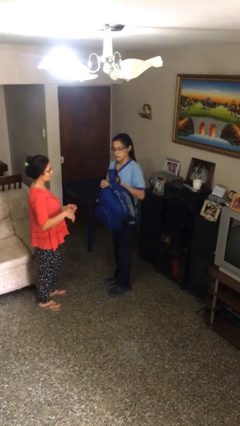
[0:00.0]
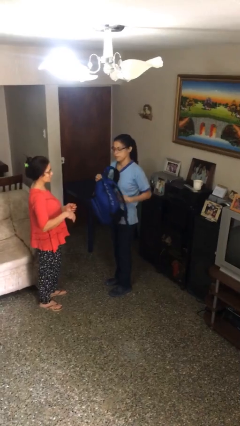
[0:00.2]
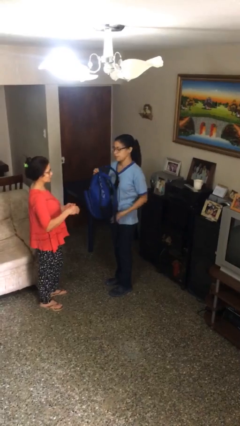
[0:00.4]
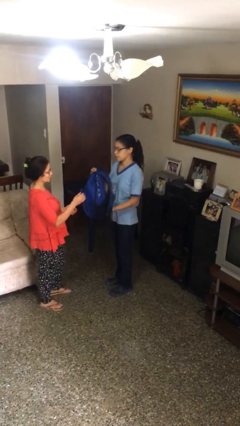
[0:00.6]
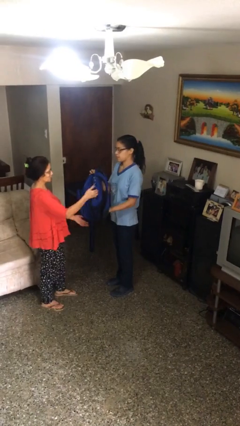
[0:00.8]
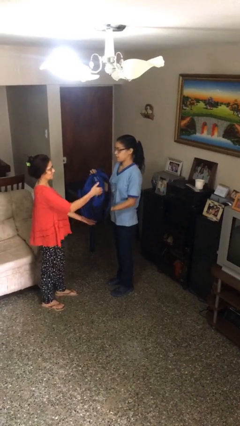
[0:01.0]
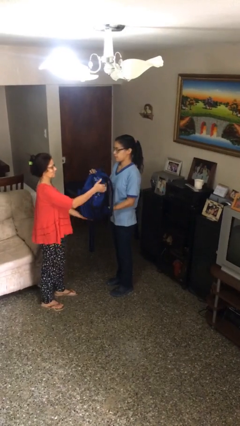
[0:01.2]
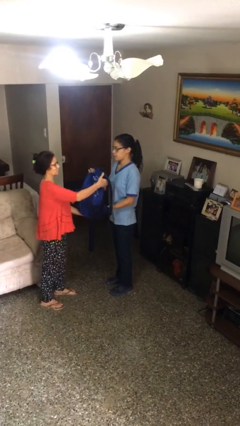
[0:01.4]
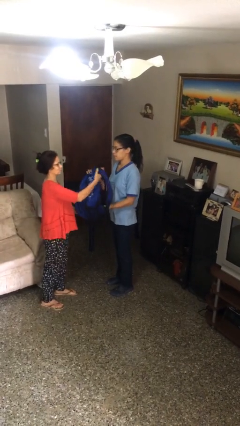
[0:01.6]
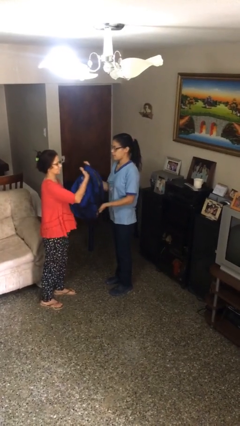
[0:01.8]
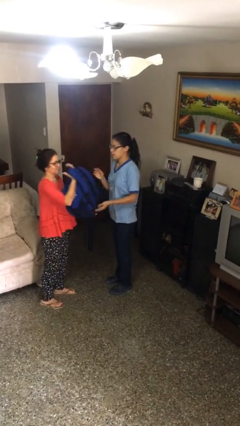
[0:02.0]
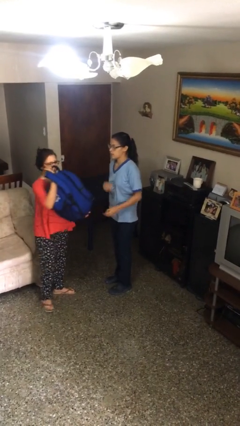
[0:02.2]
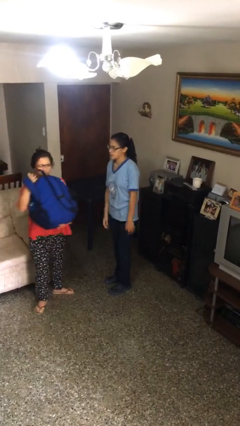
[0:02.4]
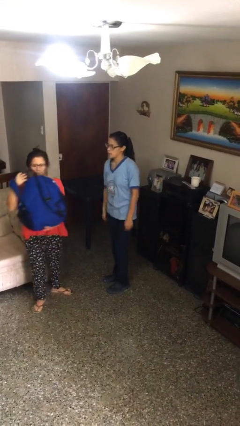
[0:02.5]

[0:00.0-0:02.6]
person transfers object to person

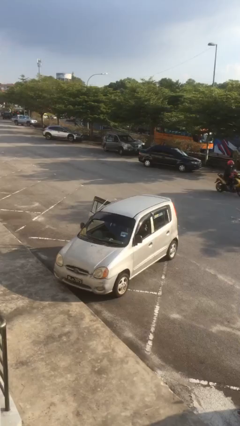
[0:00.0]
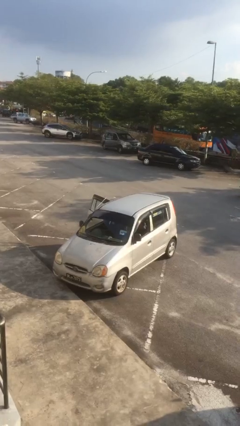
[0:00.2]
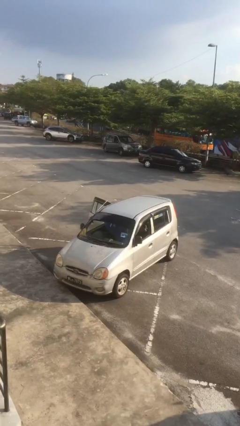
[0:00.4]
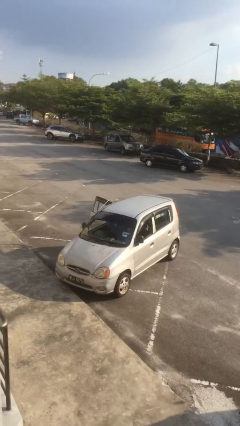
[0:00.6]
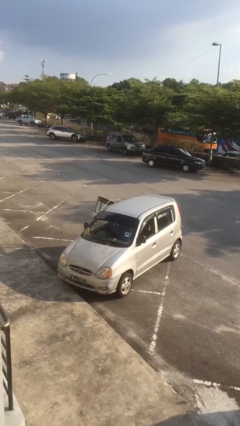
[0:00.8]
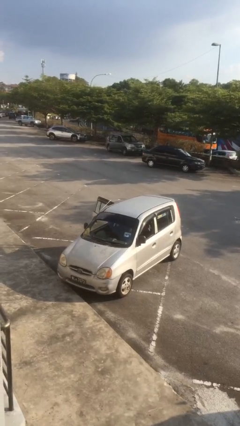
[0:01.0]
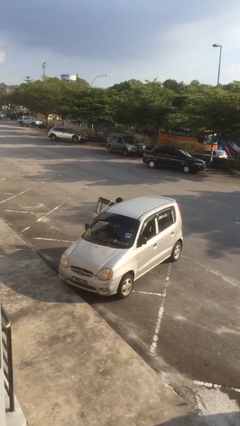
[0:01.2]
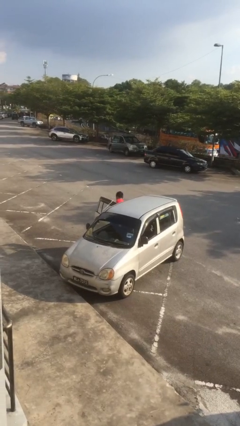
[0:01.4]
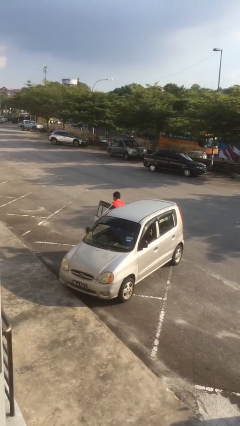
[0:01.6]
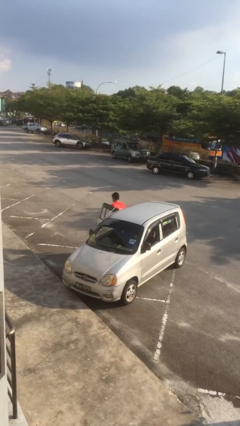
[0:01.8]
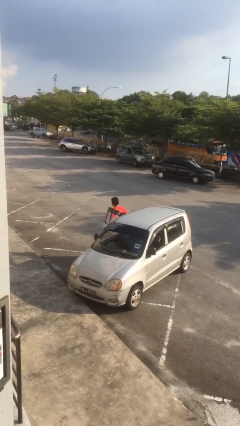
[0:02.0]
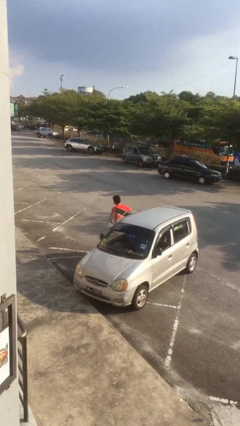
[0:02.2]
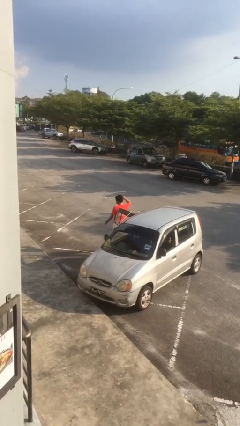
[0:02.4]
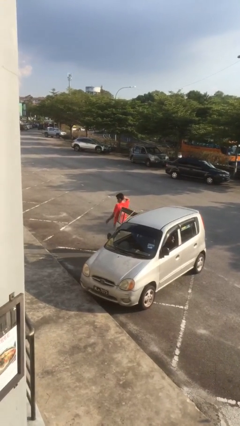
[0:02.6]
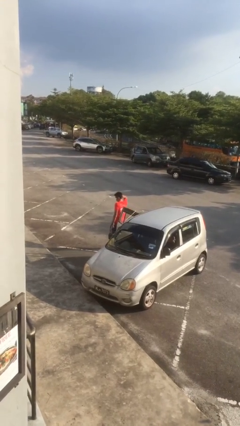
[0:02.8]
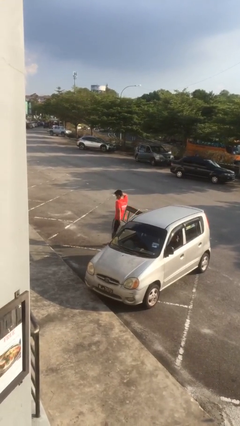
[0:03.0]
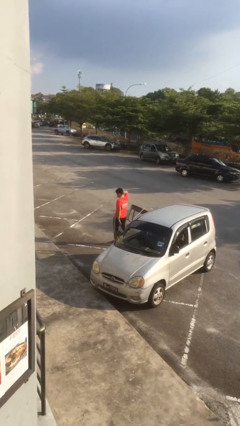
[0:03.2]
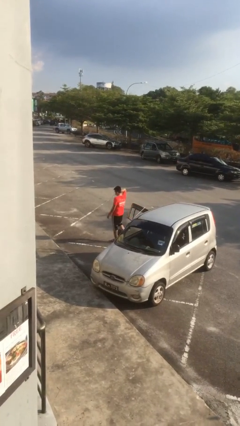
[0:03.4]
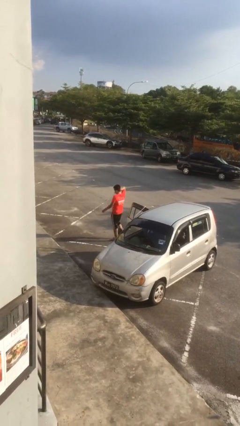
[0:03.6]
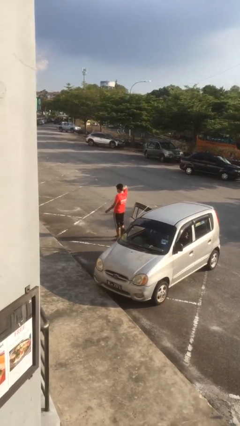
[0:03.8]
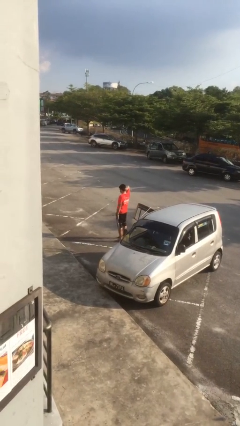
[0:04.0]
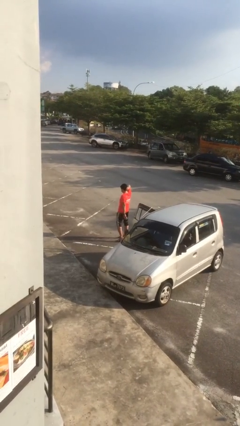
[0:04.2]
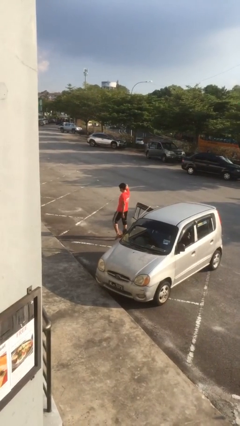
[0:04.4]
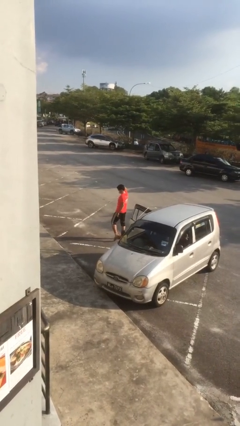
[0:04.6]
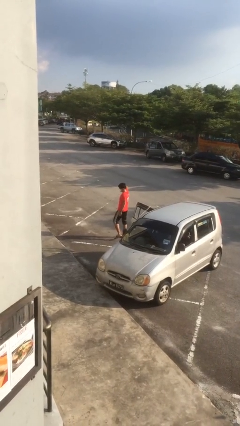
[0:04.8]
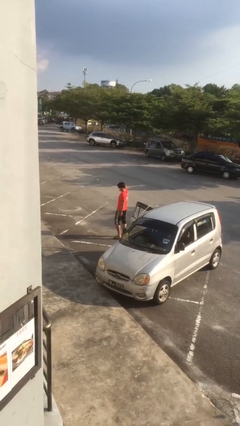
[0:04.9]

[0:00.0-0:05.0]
person exits car

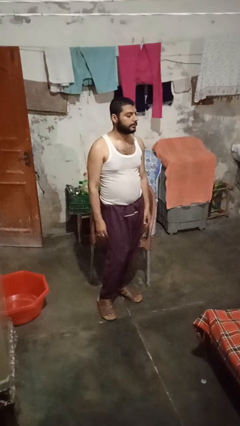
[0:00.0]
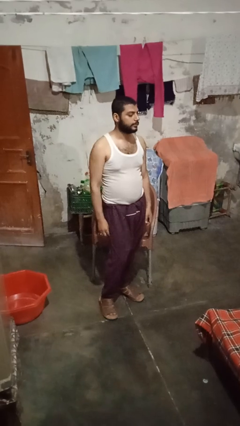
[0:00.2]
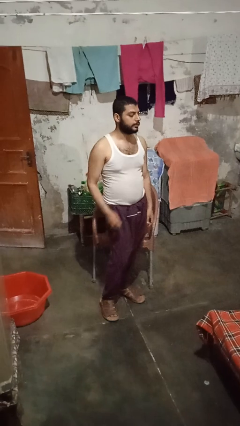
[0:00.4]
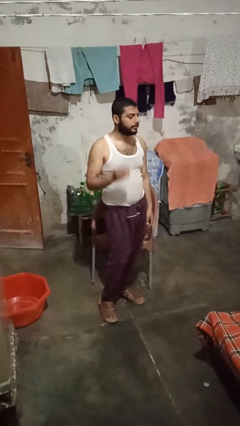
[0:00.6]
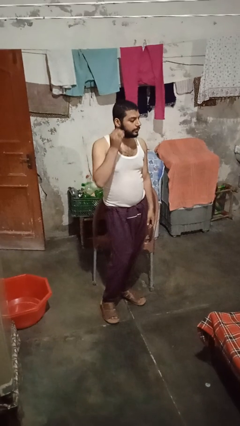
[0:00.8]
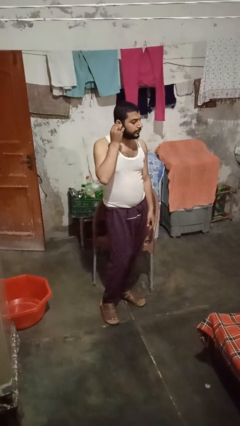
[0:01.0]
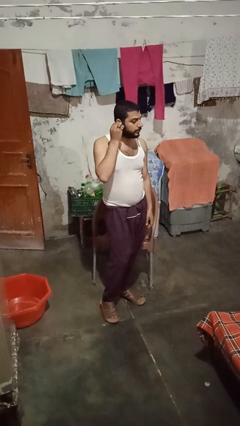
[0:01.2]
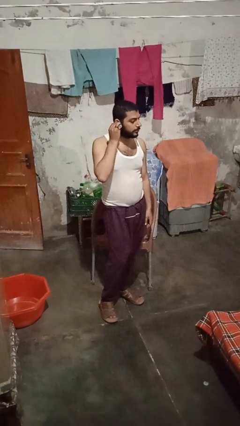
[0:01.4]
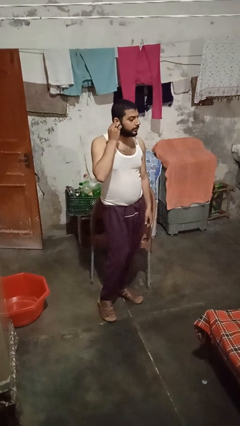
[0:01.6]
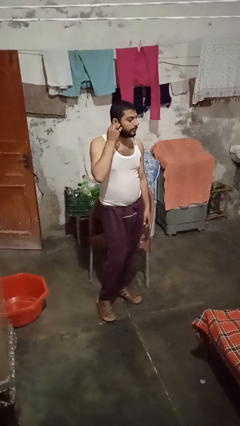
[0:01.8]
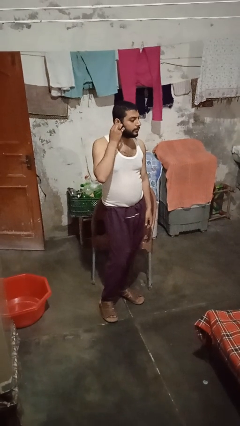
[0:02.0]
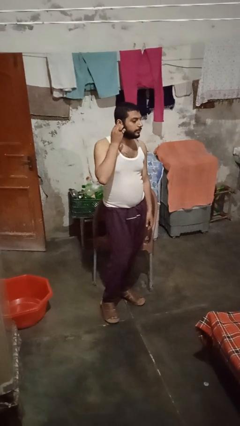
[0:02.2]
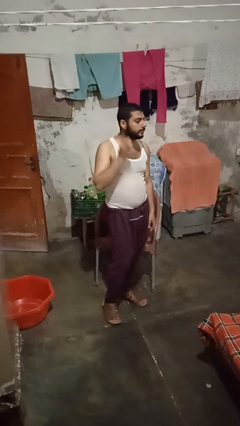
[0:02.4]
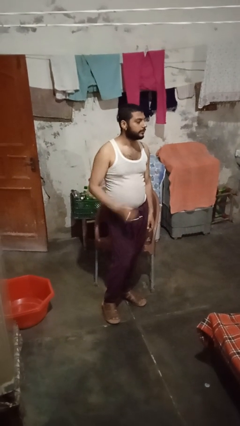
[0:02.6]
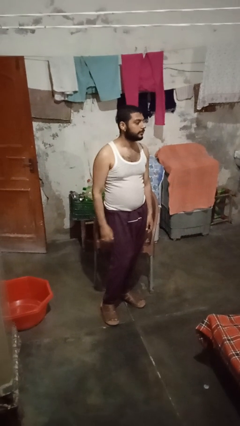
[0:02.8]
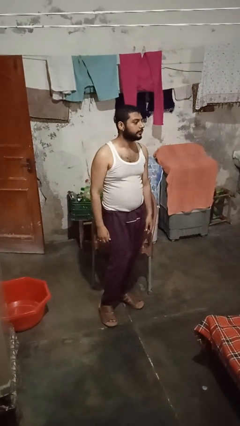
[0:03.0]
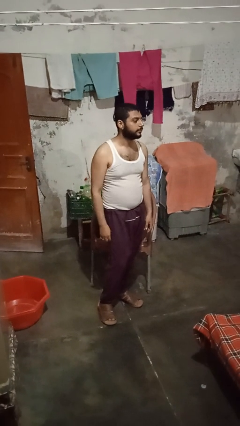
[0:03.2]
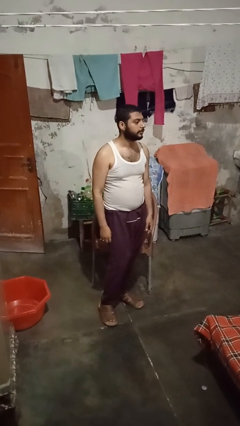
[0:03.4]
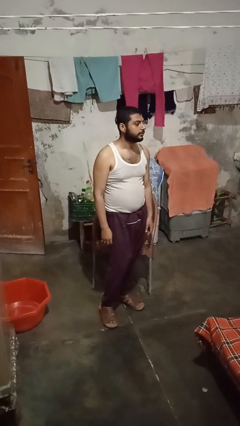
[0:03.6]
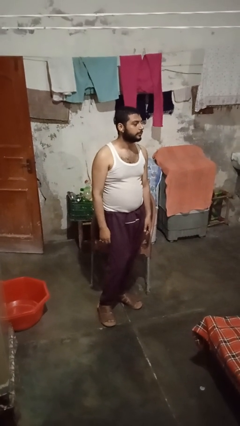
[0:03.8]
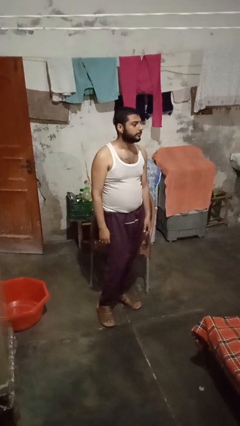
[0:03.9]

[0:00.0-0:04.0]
person puts on earrings

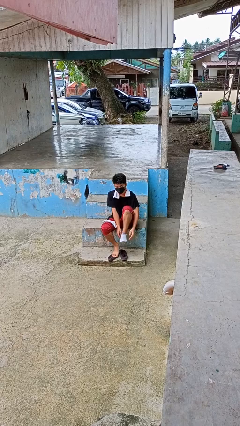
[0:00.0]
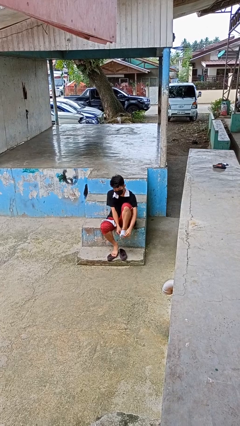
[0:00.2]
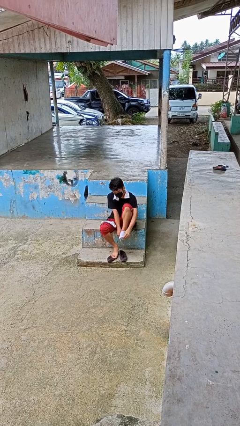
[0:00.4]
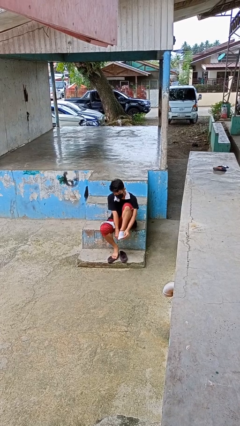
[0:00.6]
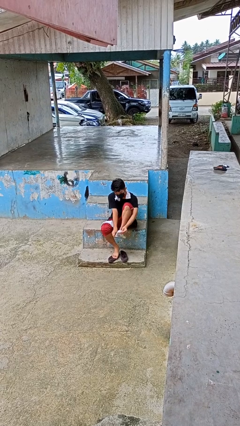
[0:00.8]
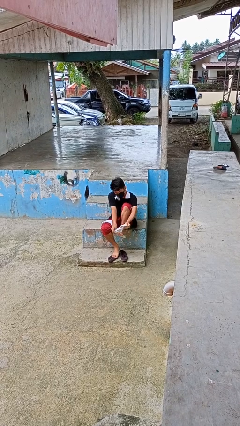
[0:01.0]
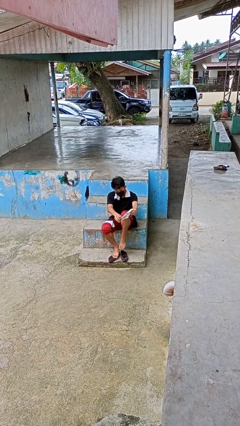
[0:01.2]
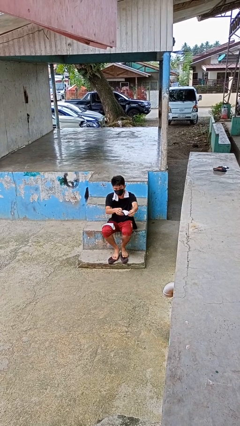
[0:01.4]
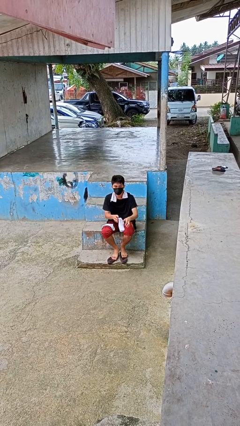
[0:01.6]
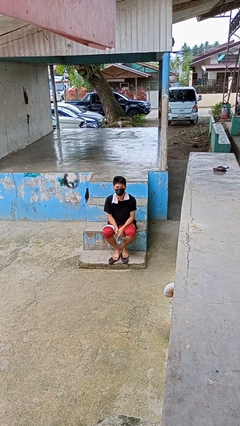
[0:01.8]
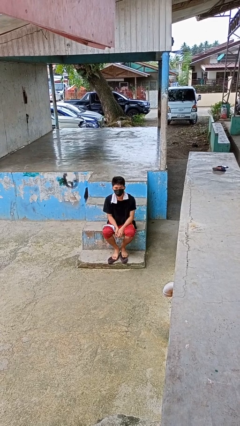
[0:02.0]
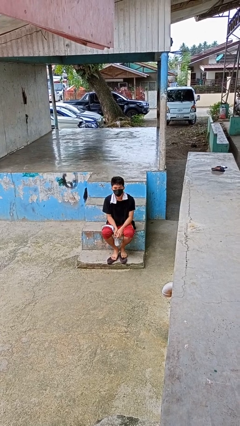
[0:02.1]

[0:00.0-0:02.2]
person takes off socks

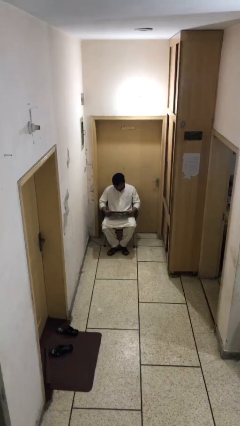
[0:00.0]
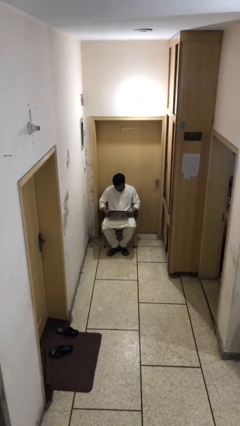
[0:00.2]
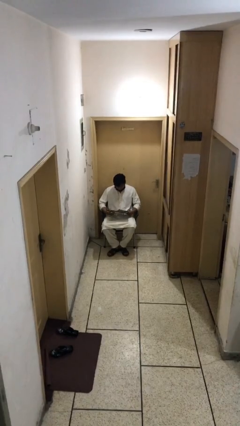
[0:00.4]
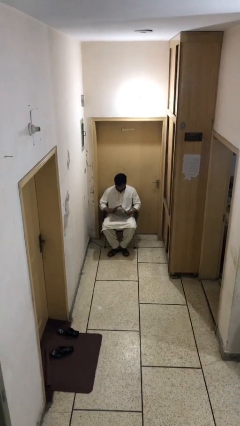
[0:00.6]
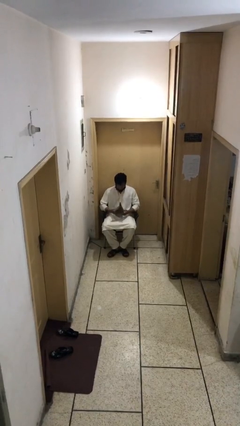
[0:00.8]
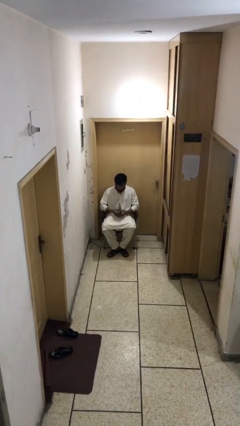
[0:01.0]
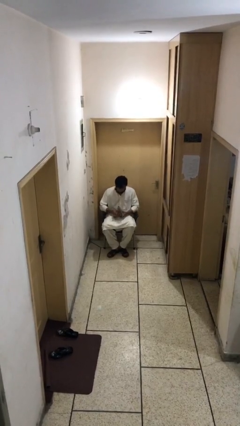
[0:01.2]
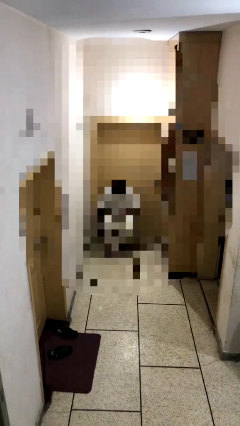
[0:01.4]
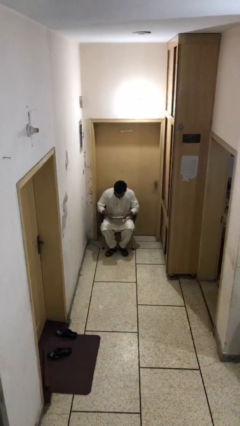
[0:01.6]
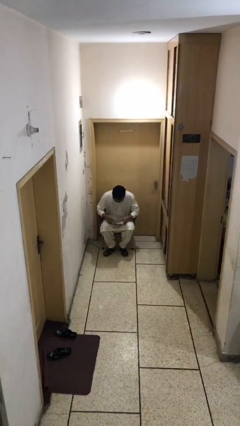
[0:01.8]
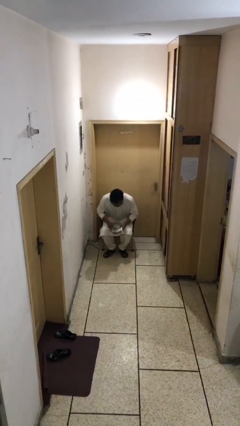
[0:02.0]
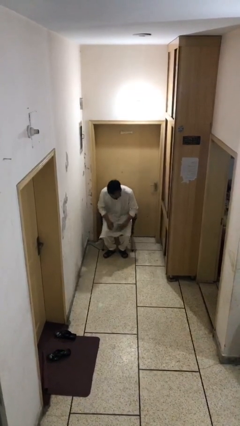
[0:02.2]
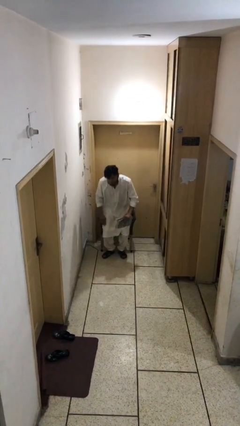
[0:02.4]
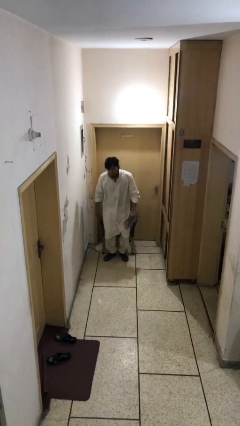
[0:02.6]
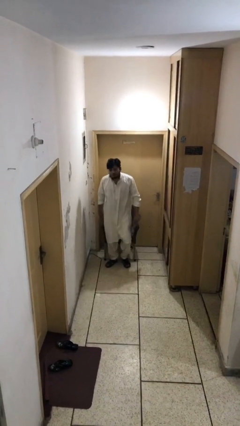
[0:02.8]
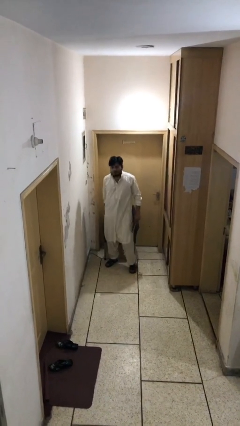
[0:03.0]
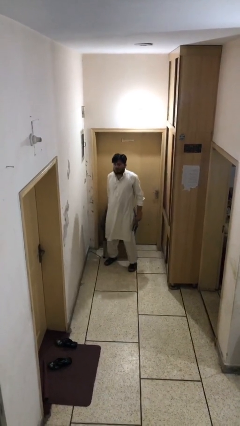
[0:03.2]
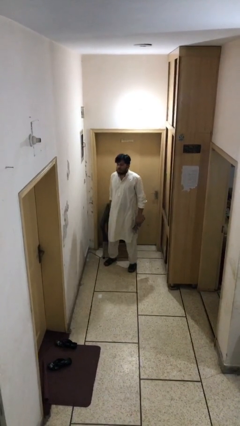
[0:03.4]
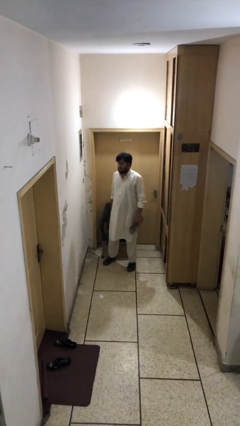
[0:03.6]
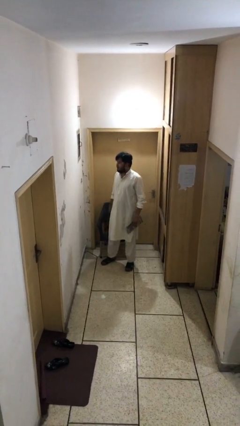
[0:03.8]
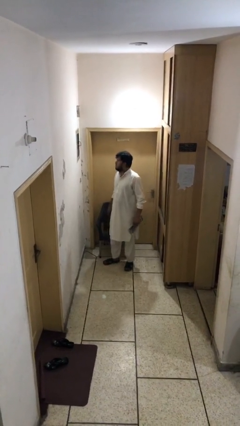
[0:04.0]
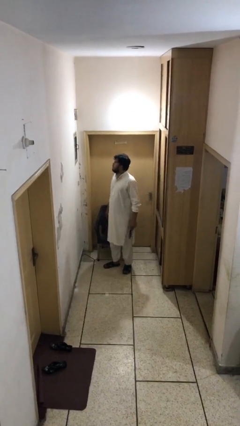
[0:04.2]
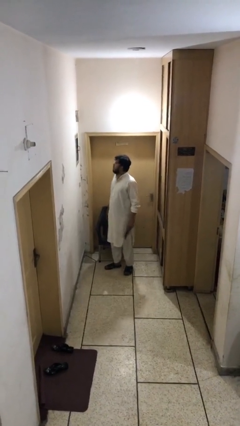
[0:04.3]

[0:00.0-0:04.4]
person stands up
